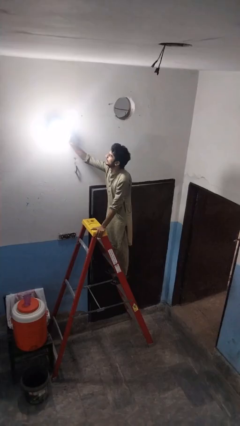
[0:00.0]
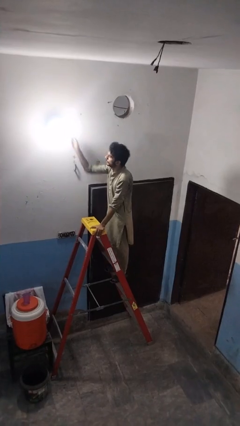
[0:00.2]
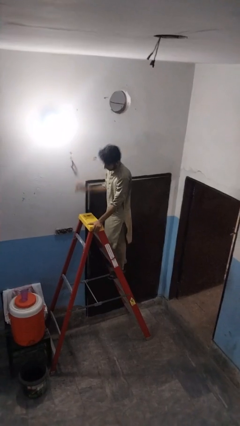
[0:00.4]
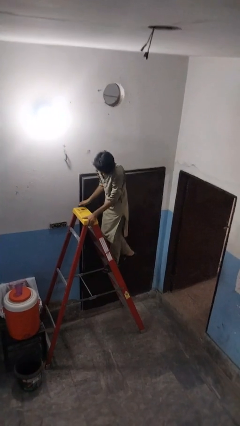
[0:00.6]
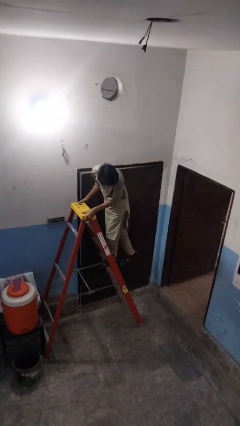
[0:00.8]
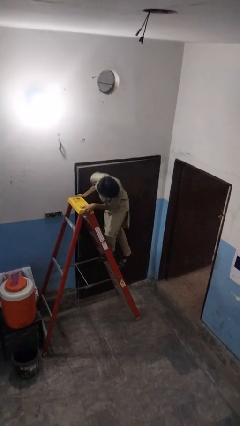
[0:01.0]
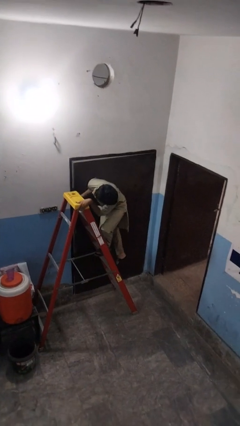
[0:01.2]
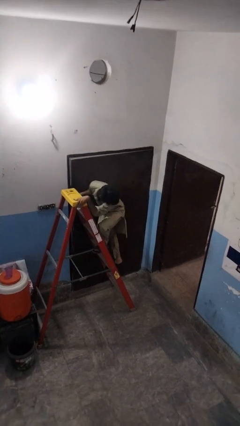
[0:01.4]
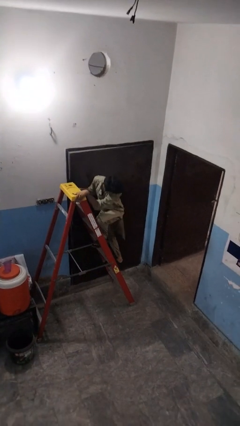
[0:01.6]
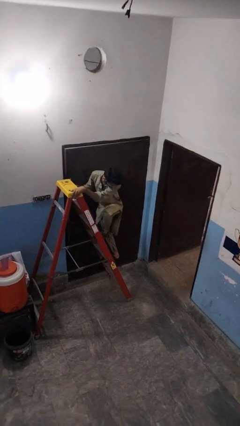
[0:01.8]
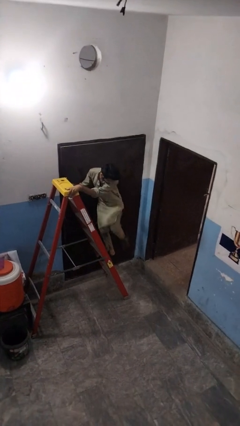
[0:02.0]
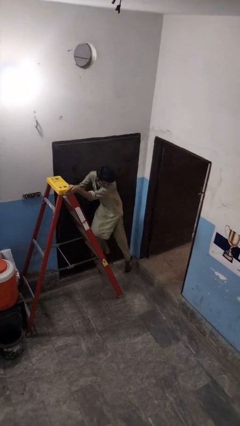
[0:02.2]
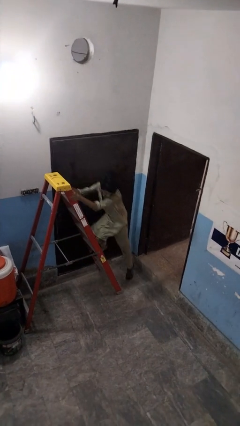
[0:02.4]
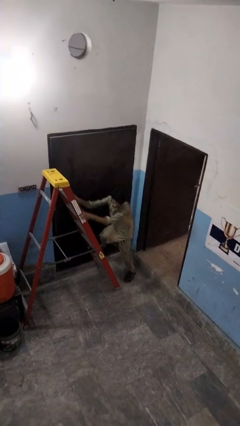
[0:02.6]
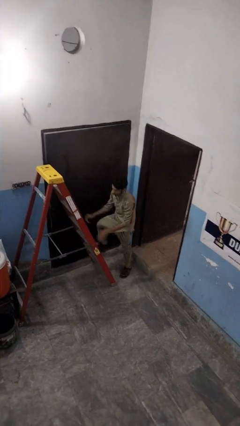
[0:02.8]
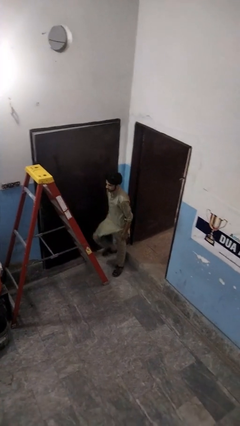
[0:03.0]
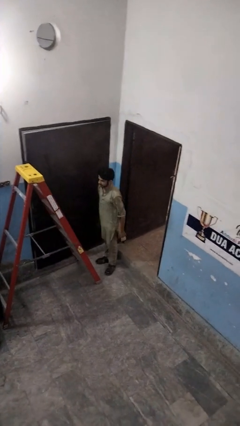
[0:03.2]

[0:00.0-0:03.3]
person climbs down ladder

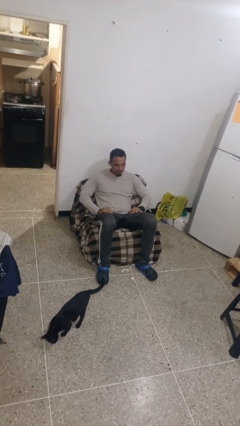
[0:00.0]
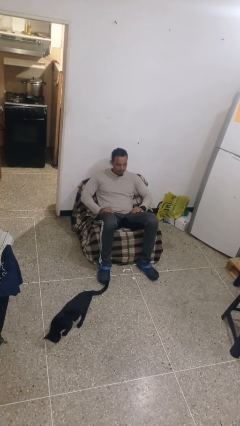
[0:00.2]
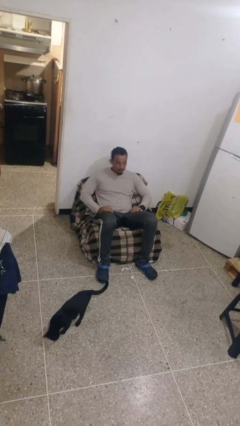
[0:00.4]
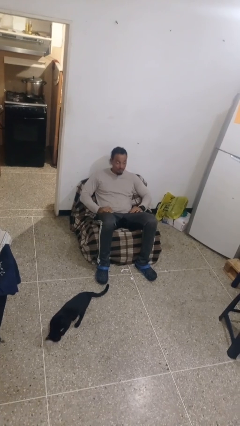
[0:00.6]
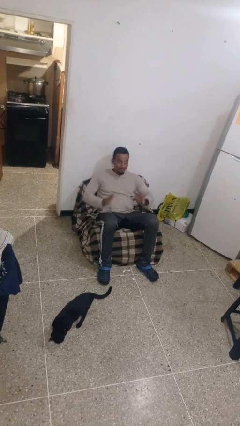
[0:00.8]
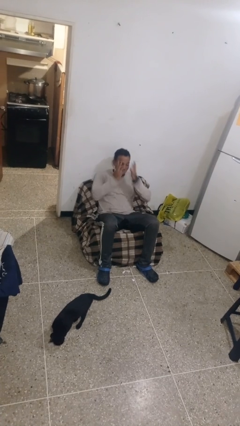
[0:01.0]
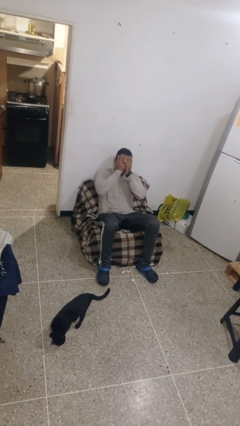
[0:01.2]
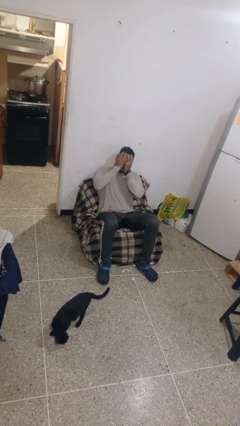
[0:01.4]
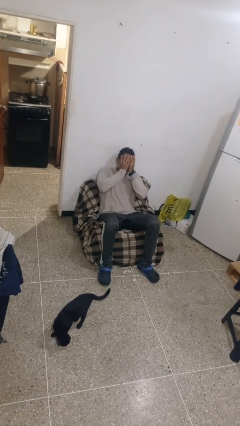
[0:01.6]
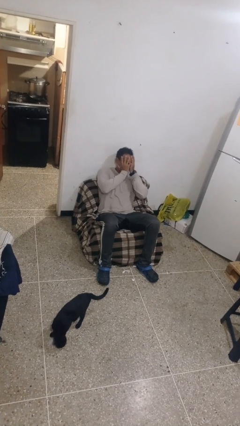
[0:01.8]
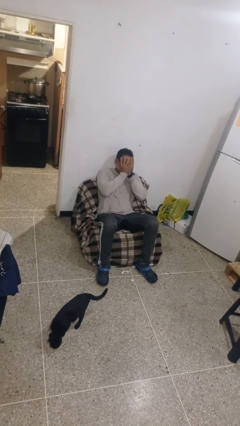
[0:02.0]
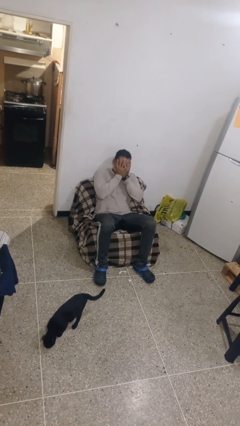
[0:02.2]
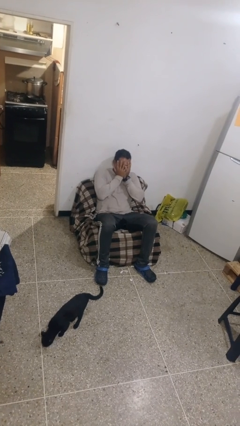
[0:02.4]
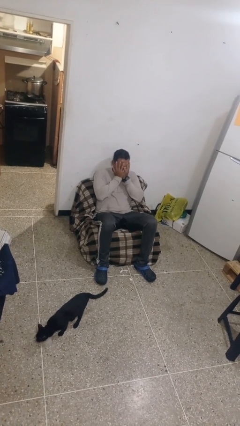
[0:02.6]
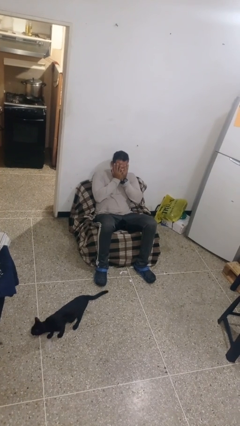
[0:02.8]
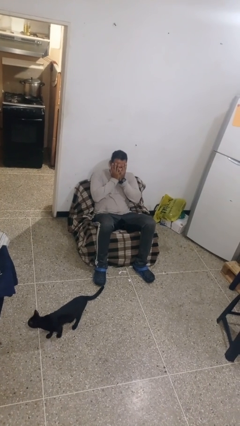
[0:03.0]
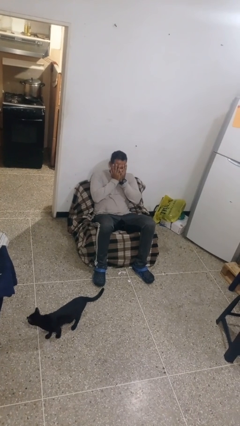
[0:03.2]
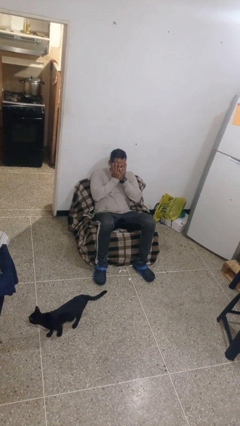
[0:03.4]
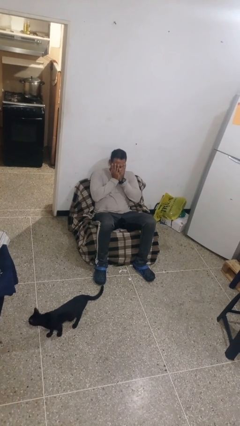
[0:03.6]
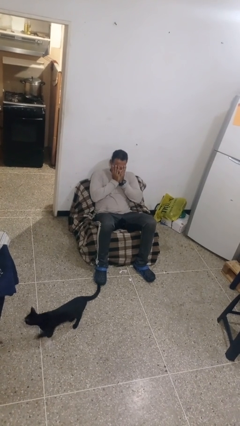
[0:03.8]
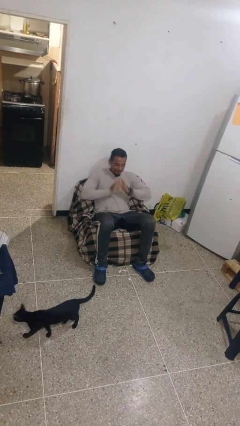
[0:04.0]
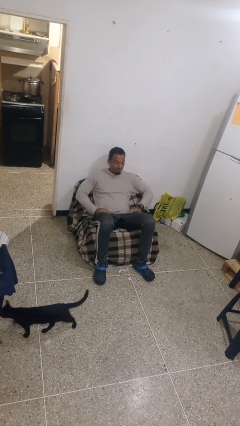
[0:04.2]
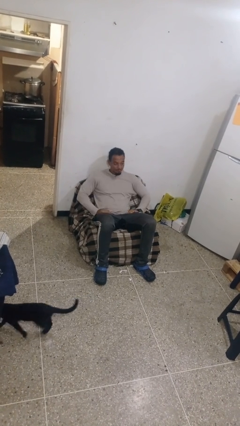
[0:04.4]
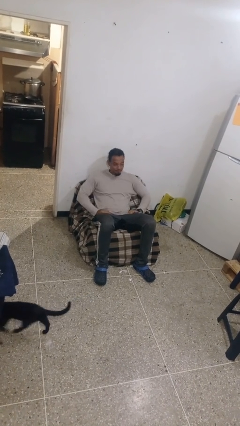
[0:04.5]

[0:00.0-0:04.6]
person covers face with hands

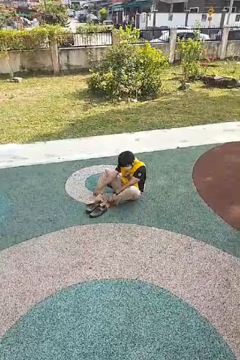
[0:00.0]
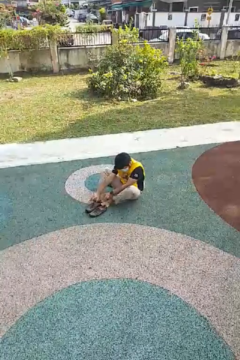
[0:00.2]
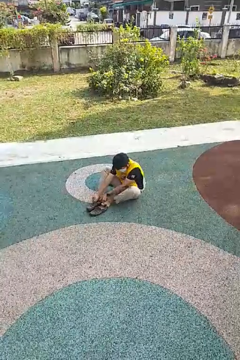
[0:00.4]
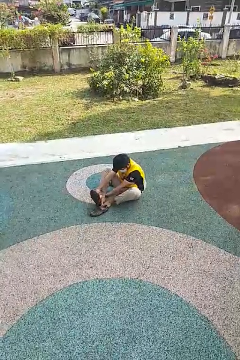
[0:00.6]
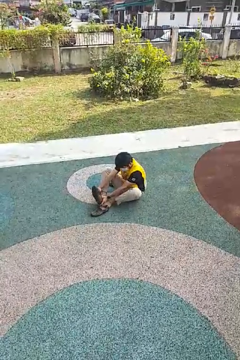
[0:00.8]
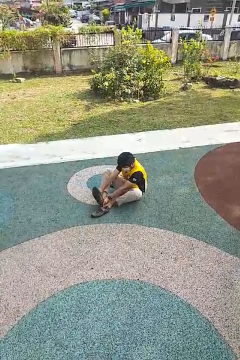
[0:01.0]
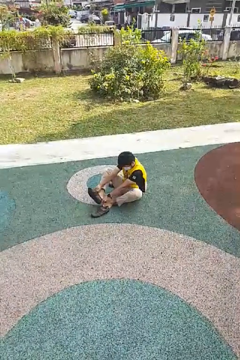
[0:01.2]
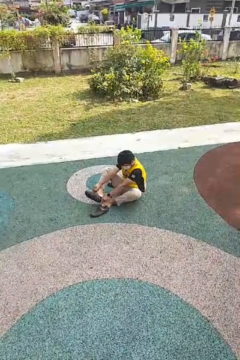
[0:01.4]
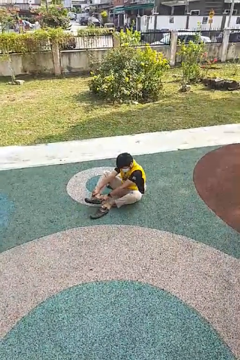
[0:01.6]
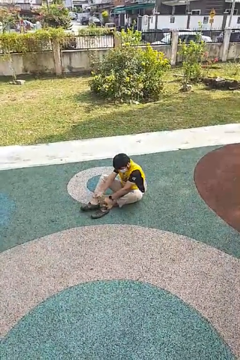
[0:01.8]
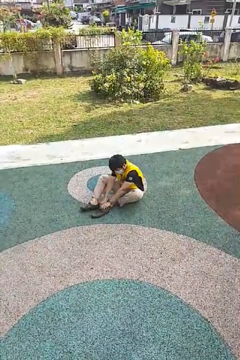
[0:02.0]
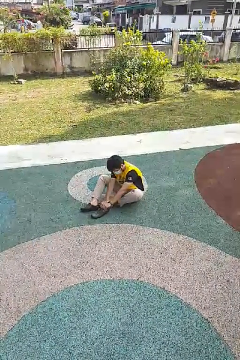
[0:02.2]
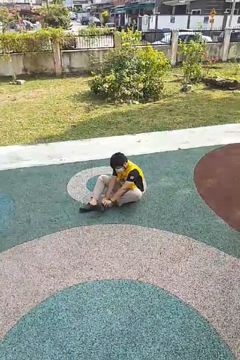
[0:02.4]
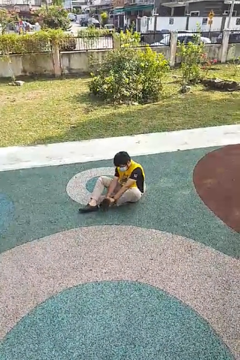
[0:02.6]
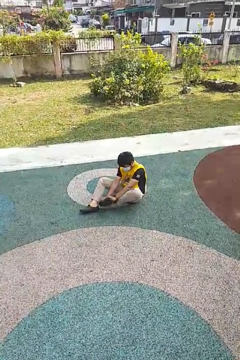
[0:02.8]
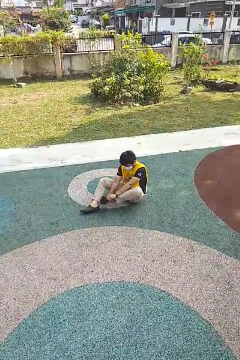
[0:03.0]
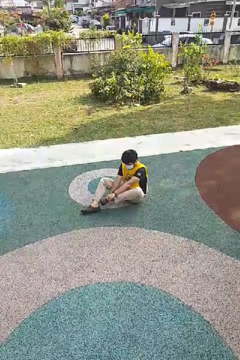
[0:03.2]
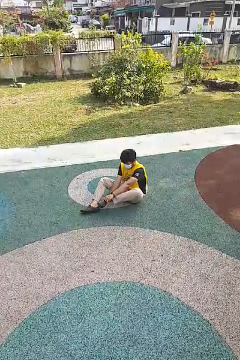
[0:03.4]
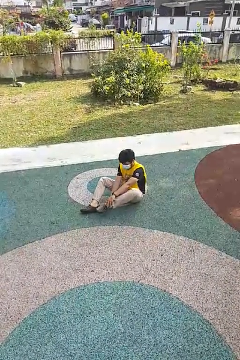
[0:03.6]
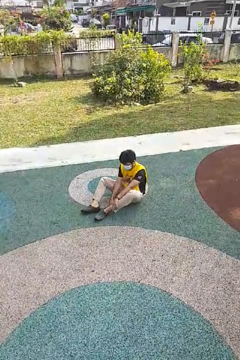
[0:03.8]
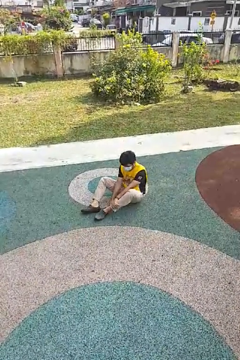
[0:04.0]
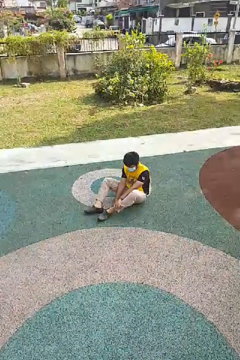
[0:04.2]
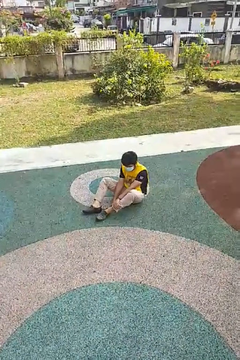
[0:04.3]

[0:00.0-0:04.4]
person puts on shoes

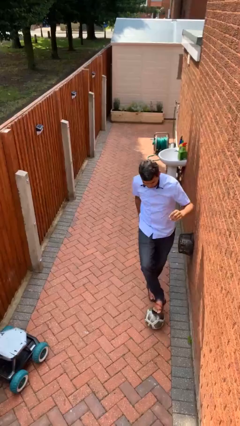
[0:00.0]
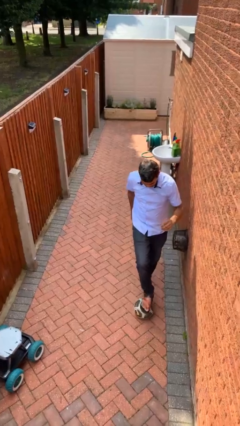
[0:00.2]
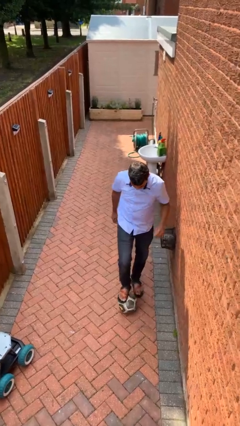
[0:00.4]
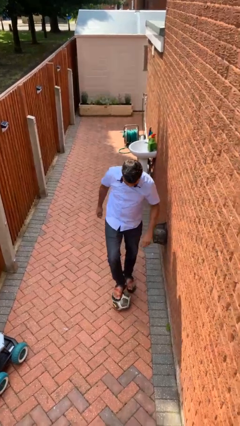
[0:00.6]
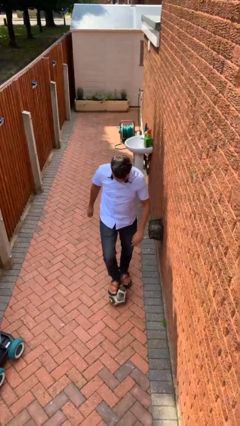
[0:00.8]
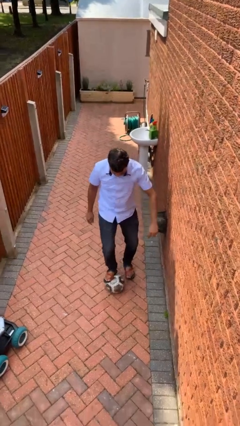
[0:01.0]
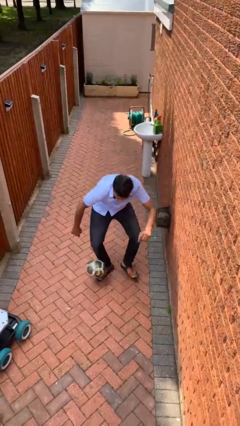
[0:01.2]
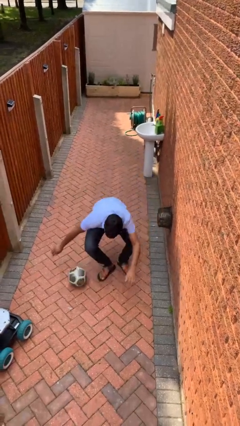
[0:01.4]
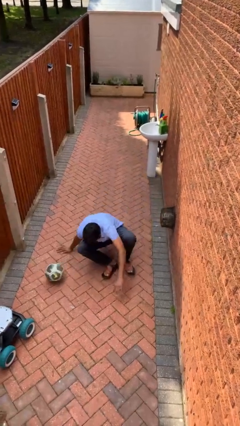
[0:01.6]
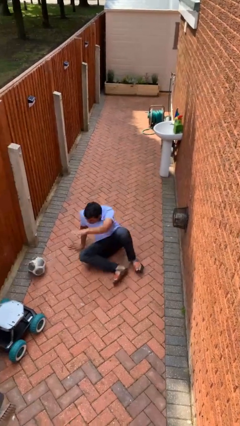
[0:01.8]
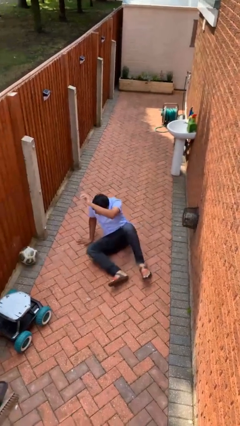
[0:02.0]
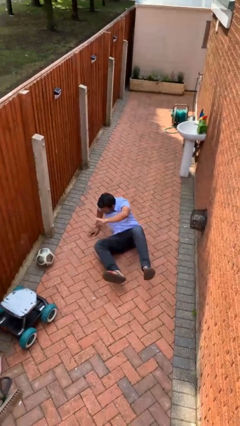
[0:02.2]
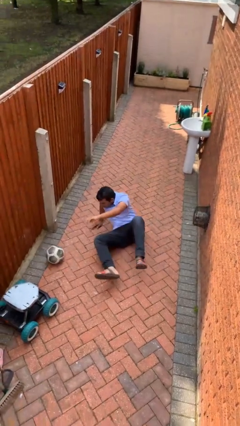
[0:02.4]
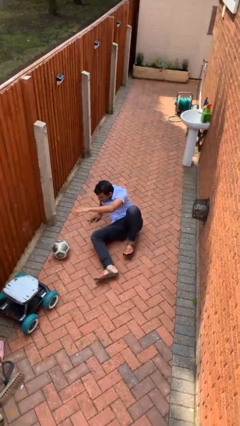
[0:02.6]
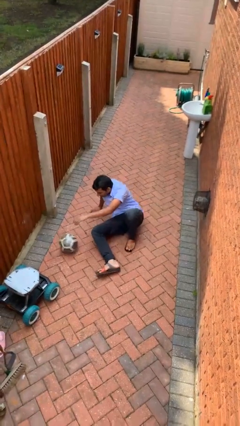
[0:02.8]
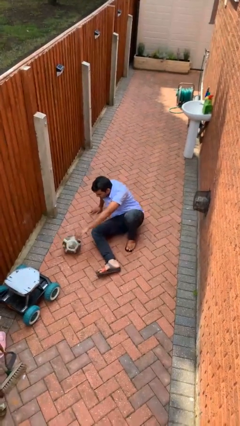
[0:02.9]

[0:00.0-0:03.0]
person trips on object on floor

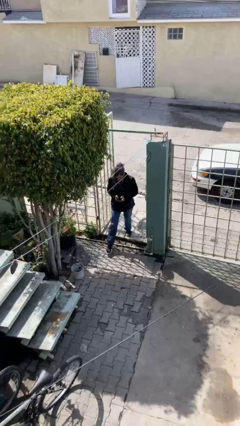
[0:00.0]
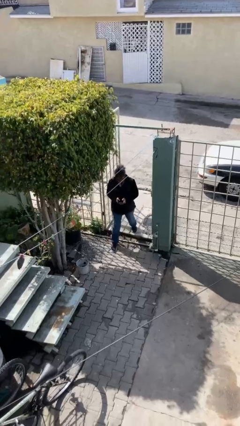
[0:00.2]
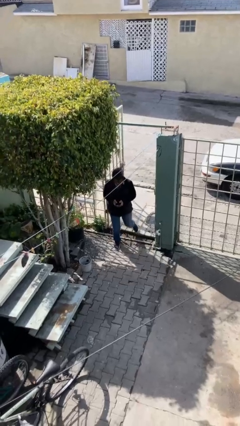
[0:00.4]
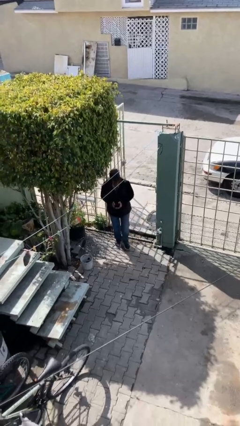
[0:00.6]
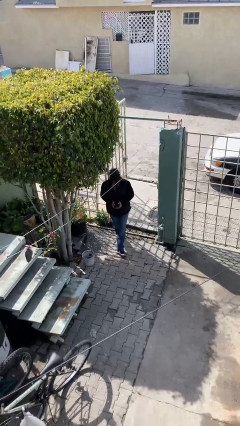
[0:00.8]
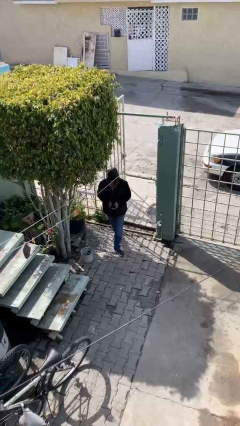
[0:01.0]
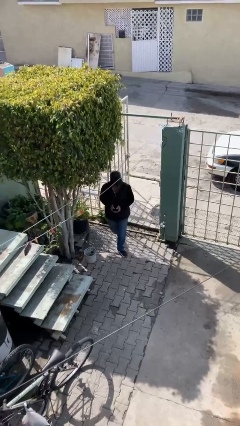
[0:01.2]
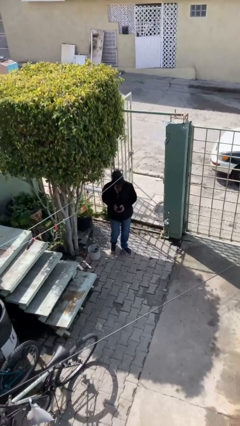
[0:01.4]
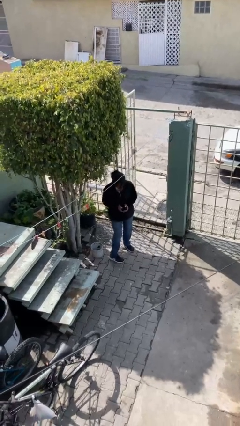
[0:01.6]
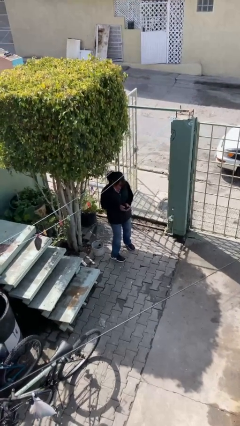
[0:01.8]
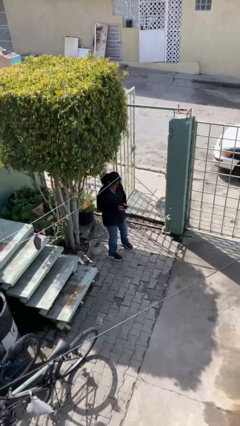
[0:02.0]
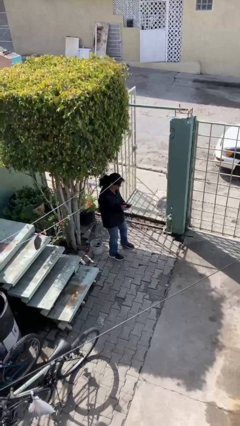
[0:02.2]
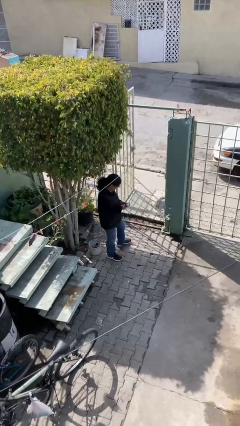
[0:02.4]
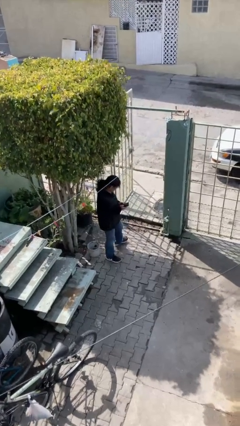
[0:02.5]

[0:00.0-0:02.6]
person enters scene through structure

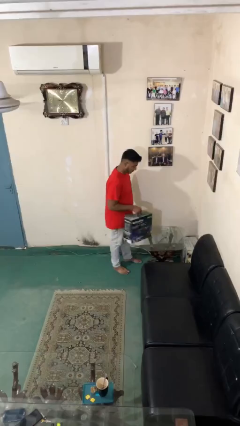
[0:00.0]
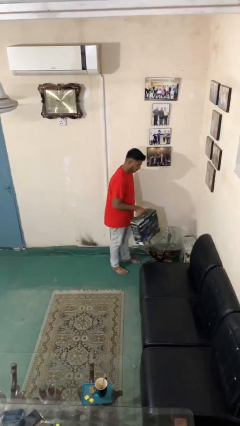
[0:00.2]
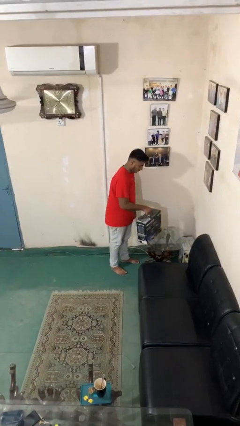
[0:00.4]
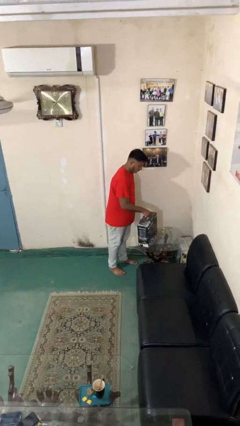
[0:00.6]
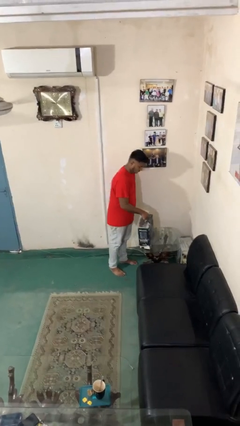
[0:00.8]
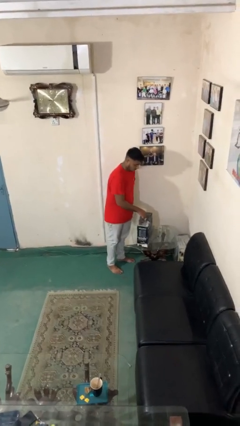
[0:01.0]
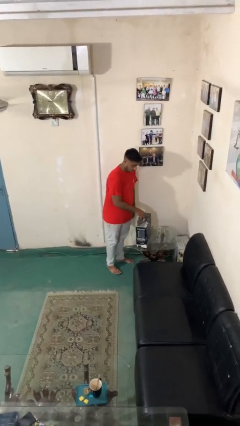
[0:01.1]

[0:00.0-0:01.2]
person puts down object on table
